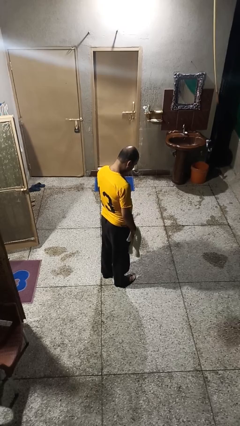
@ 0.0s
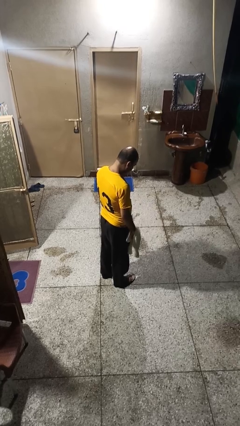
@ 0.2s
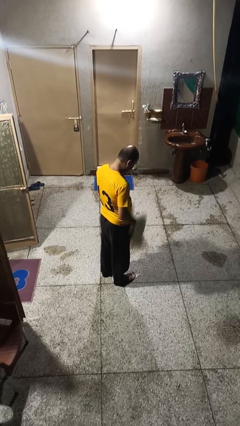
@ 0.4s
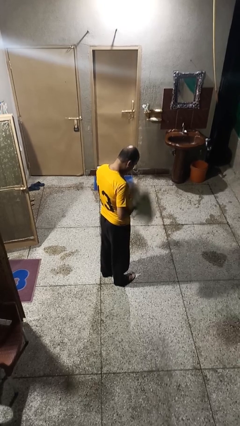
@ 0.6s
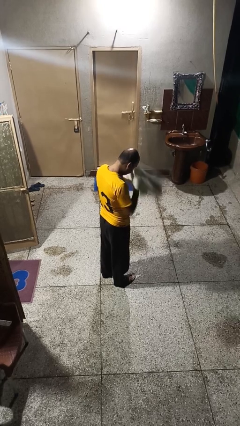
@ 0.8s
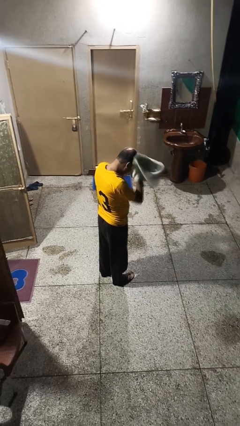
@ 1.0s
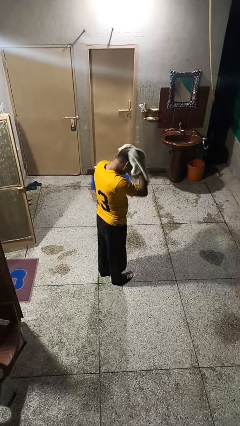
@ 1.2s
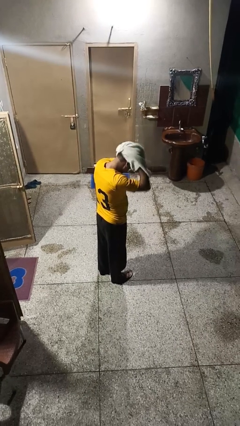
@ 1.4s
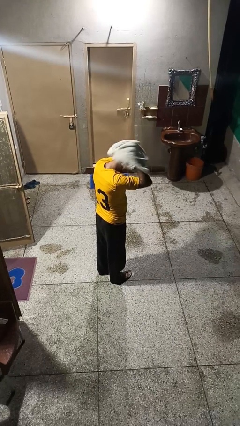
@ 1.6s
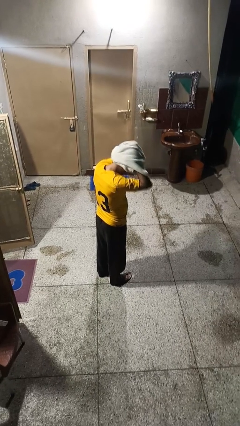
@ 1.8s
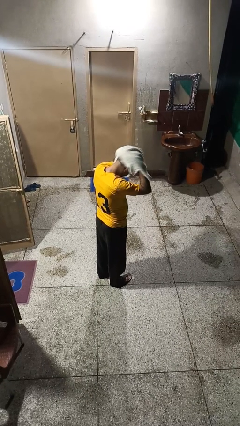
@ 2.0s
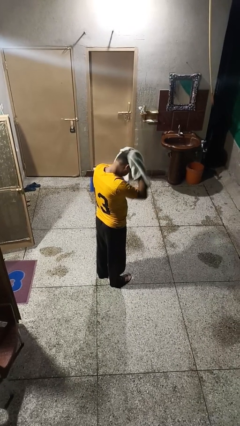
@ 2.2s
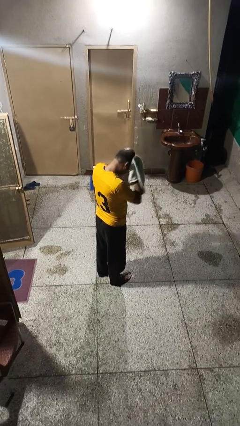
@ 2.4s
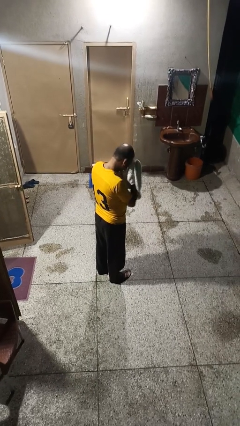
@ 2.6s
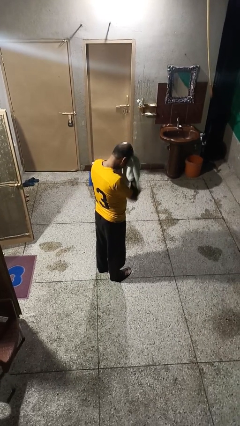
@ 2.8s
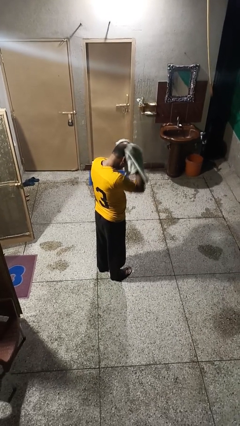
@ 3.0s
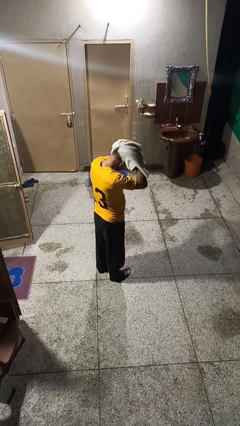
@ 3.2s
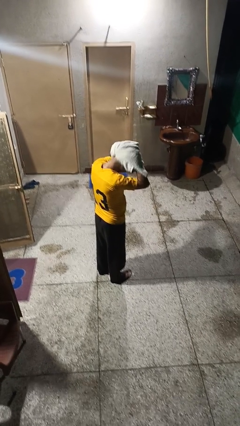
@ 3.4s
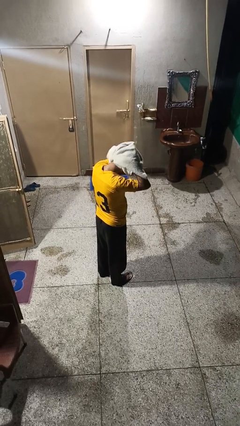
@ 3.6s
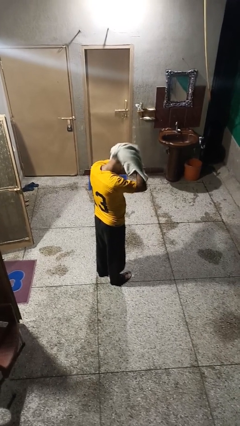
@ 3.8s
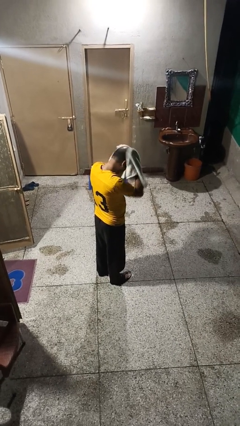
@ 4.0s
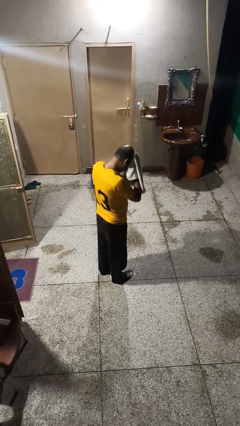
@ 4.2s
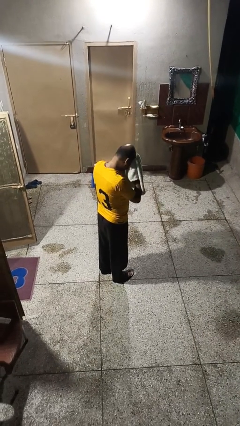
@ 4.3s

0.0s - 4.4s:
person dries hair with towel

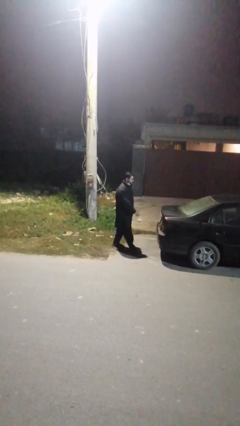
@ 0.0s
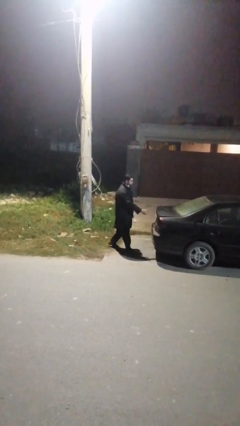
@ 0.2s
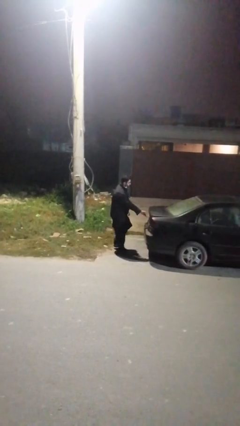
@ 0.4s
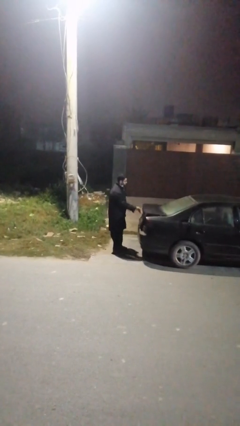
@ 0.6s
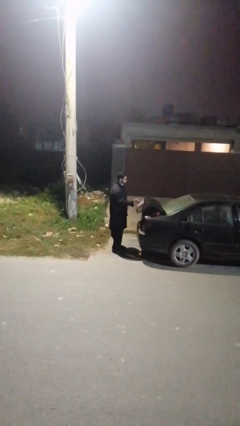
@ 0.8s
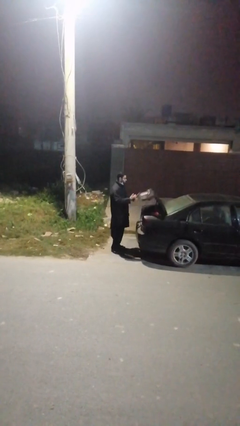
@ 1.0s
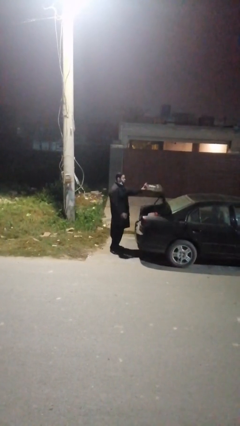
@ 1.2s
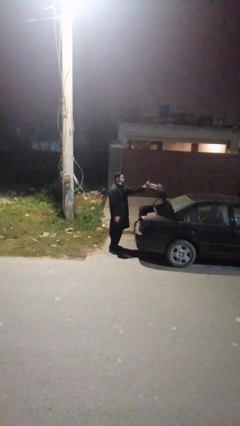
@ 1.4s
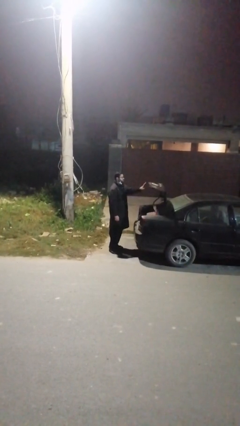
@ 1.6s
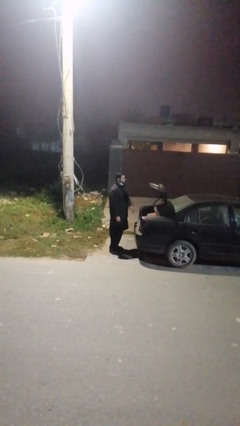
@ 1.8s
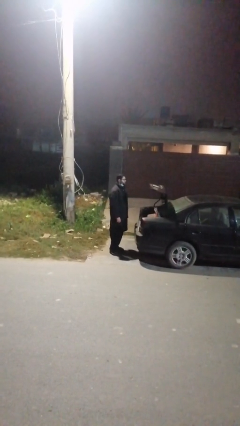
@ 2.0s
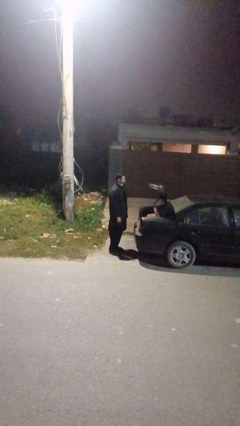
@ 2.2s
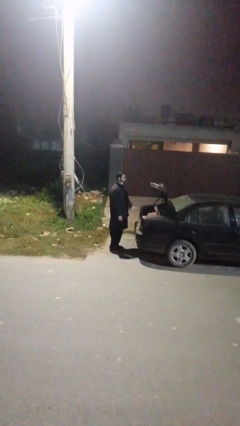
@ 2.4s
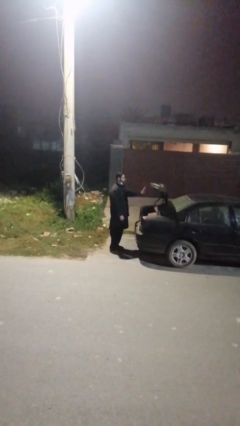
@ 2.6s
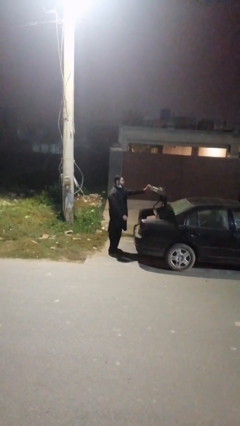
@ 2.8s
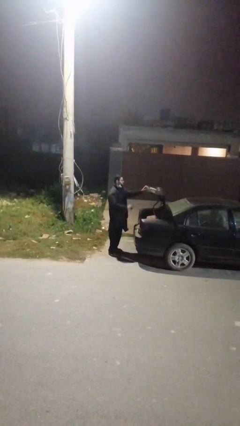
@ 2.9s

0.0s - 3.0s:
person opens car trunk

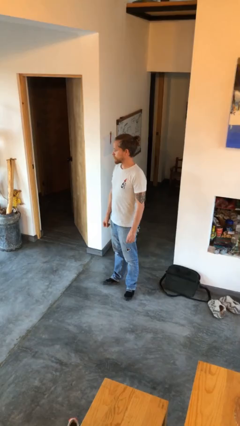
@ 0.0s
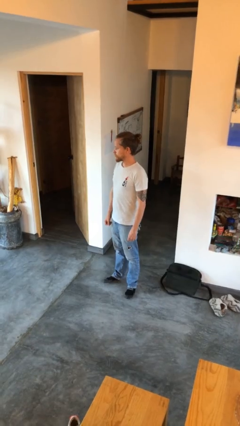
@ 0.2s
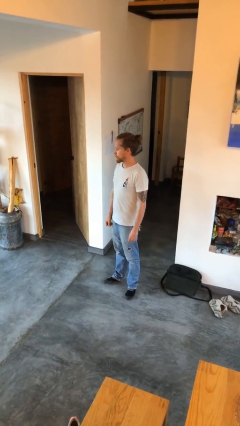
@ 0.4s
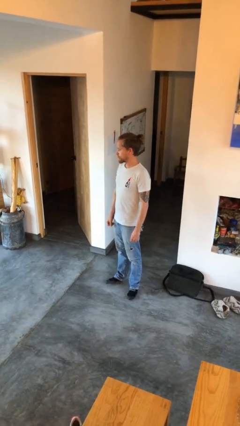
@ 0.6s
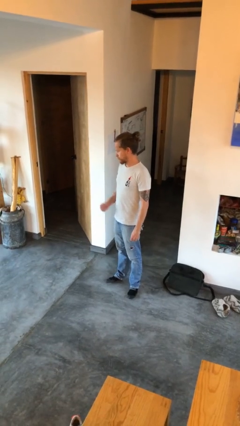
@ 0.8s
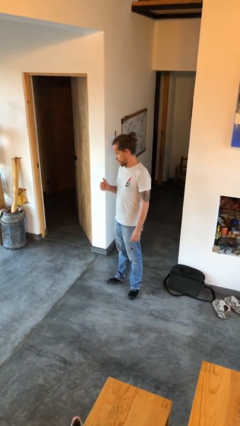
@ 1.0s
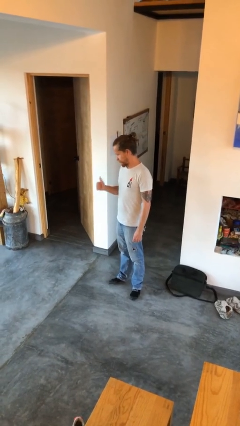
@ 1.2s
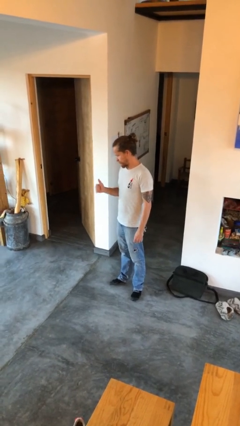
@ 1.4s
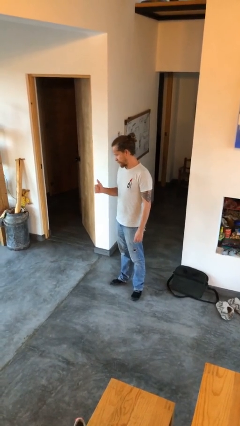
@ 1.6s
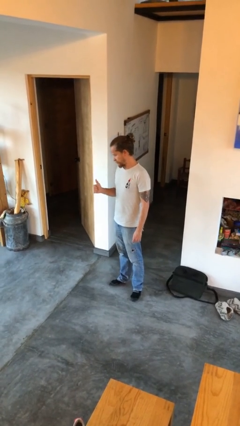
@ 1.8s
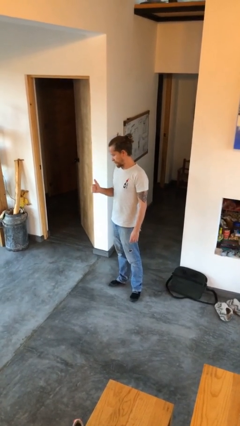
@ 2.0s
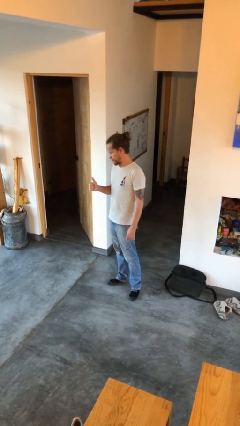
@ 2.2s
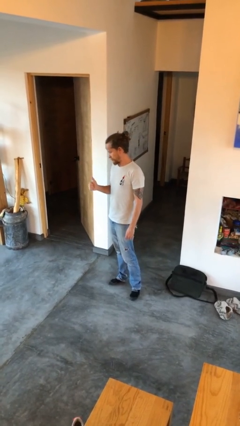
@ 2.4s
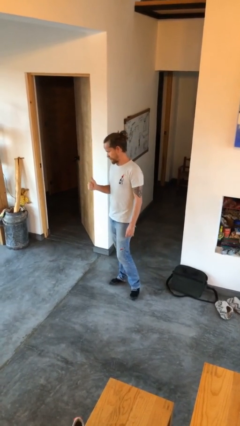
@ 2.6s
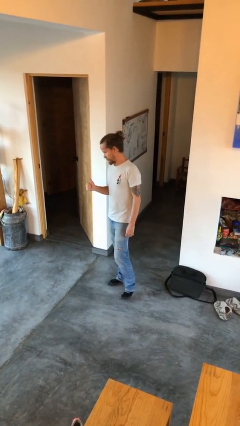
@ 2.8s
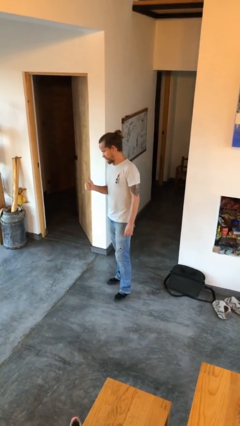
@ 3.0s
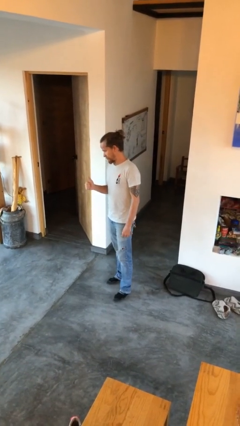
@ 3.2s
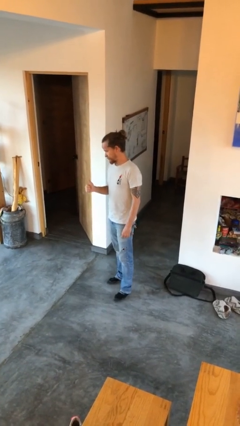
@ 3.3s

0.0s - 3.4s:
person gestures thumbs up

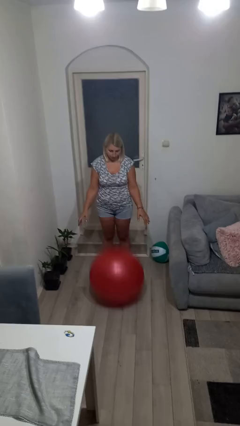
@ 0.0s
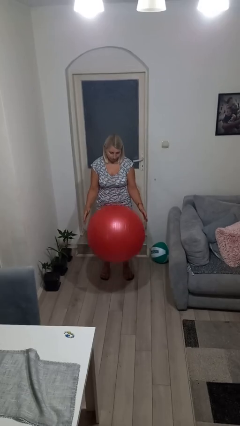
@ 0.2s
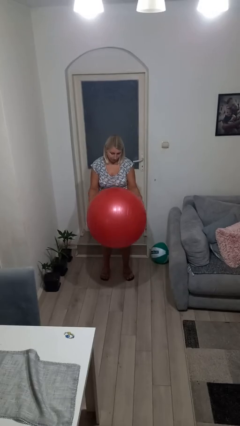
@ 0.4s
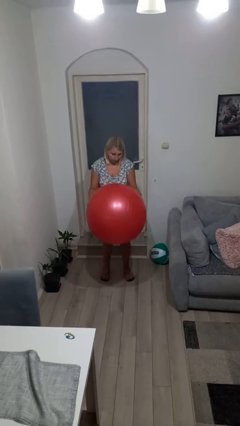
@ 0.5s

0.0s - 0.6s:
person bounces ball on floor

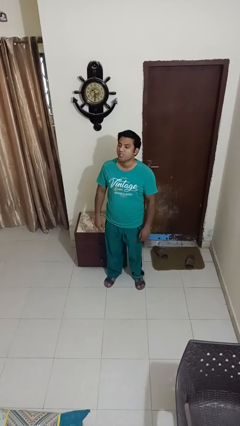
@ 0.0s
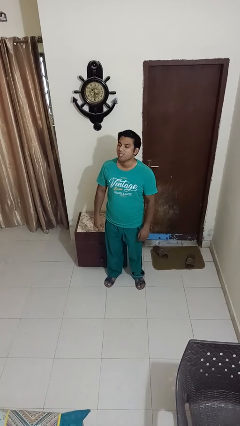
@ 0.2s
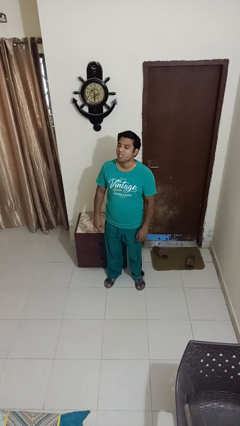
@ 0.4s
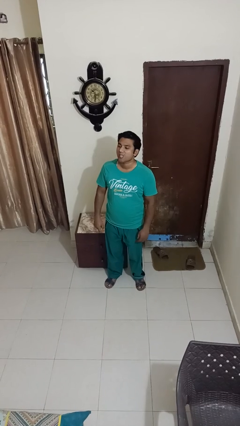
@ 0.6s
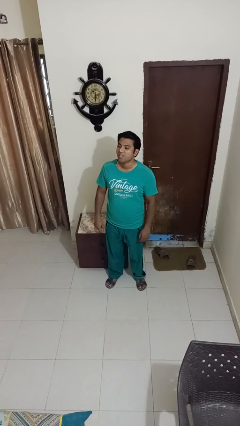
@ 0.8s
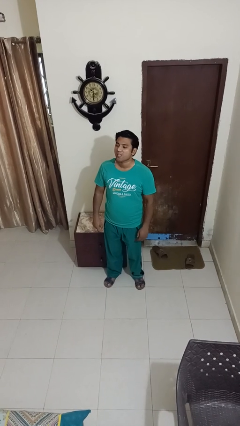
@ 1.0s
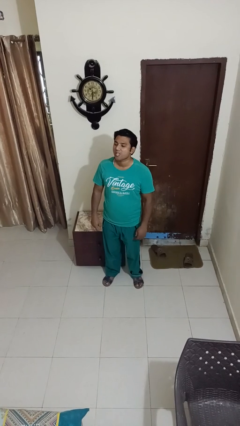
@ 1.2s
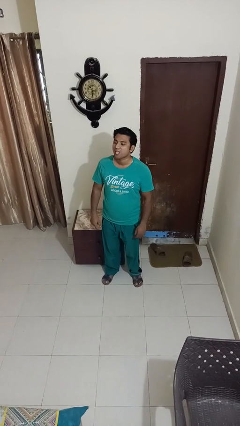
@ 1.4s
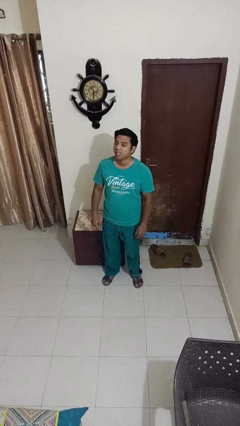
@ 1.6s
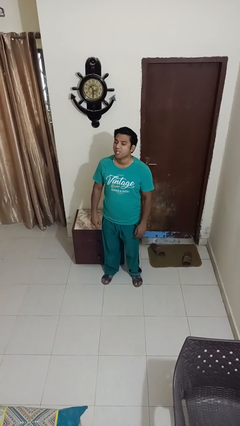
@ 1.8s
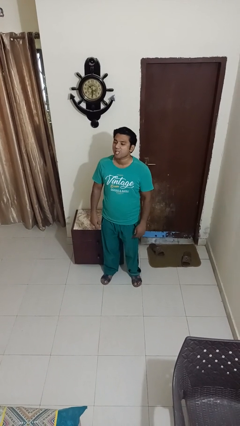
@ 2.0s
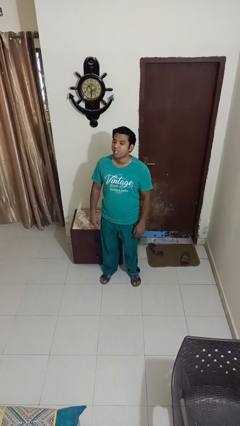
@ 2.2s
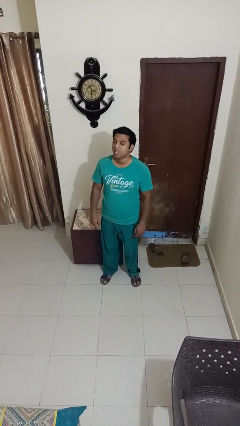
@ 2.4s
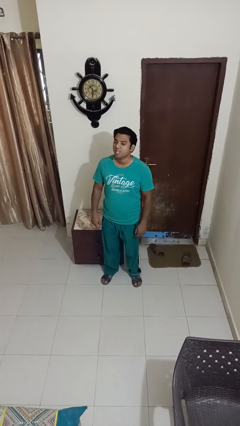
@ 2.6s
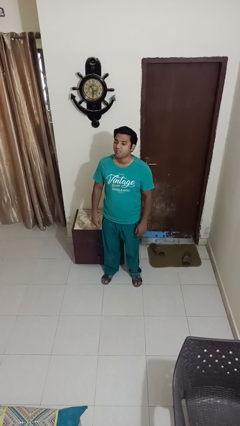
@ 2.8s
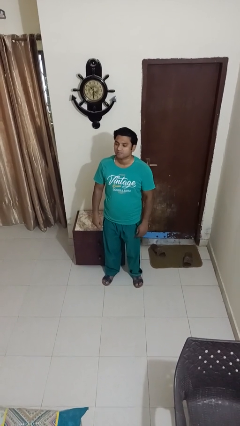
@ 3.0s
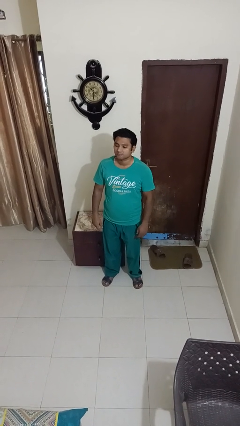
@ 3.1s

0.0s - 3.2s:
person sticks out tongue

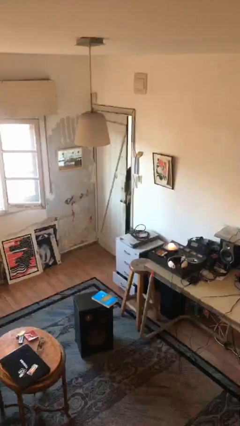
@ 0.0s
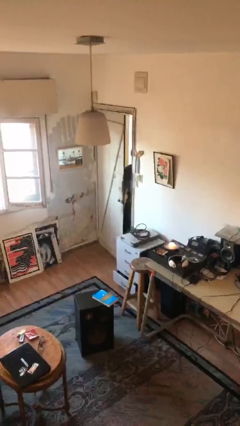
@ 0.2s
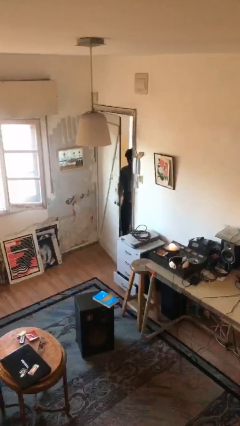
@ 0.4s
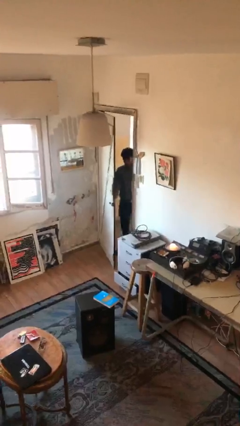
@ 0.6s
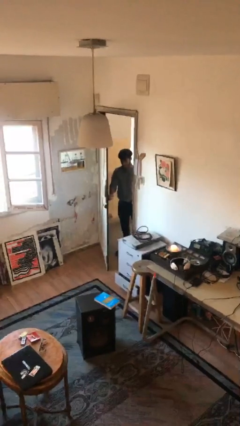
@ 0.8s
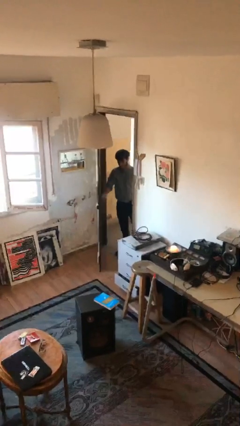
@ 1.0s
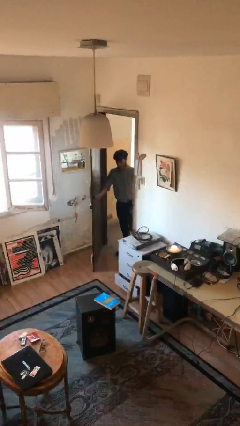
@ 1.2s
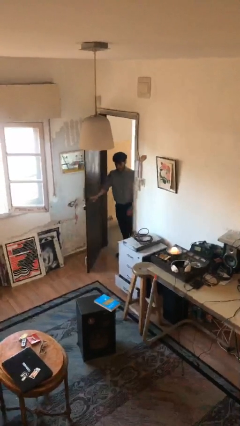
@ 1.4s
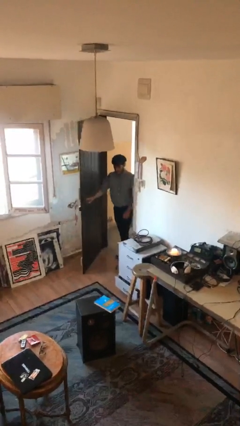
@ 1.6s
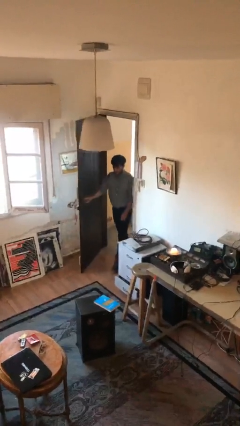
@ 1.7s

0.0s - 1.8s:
person opens facility door

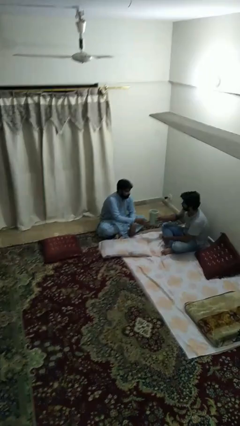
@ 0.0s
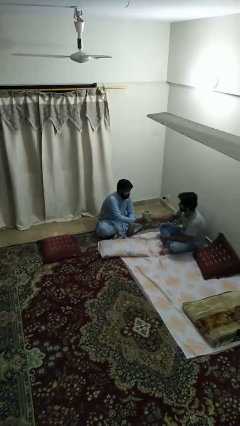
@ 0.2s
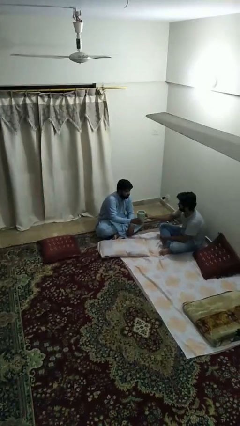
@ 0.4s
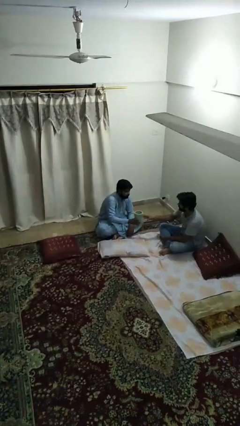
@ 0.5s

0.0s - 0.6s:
person transfers object to person

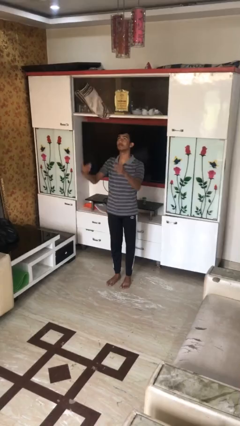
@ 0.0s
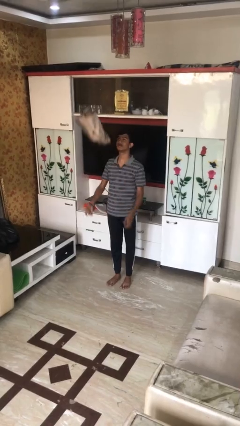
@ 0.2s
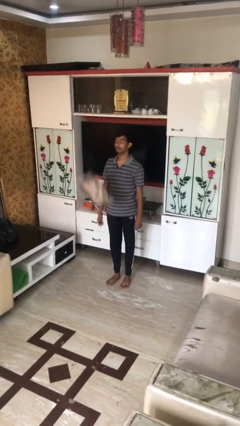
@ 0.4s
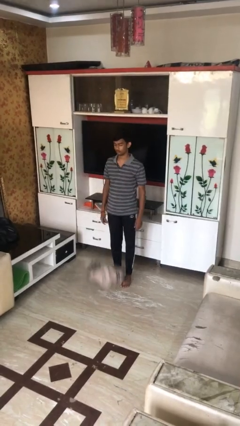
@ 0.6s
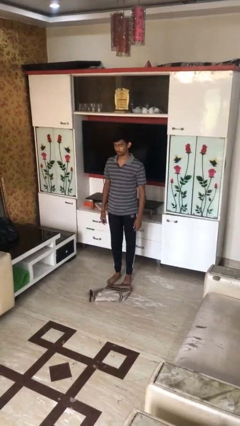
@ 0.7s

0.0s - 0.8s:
person throws object into air
